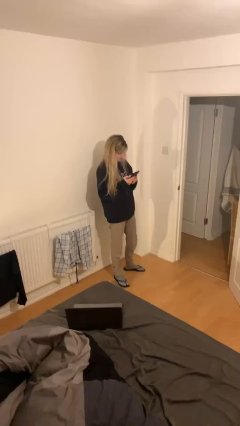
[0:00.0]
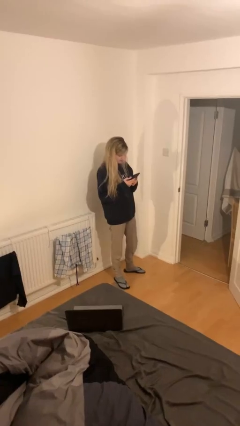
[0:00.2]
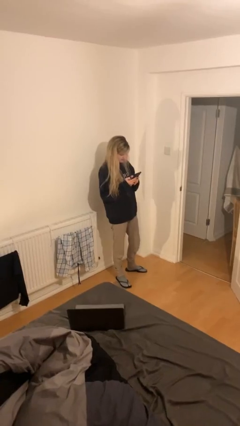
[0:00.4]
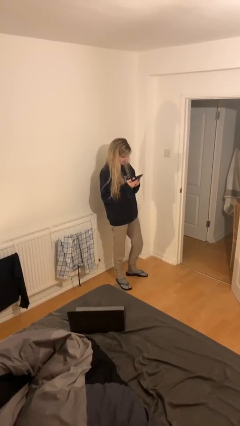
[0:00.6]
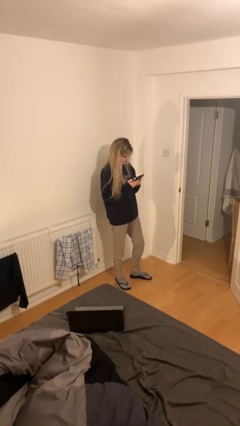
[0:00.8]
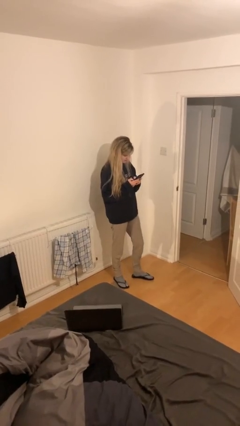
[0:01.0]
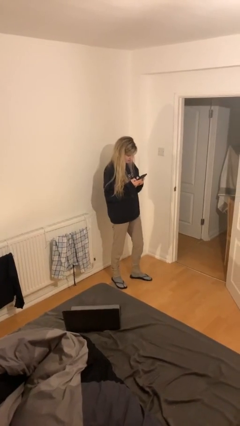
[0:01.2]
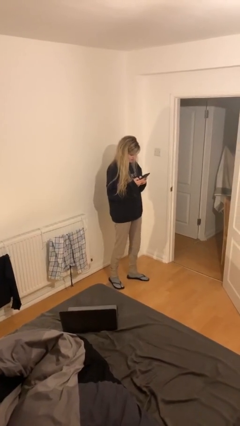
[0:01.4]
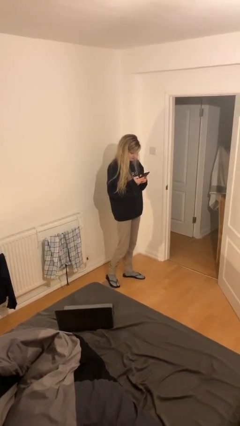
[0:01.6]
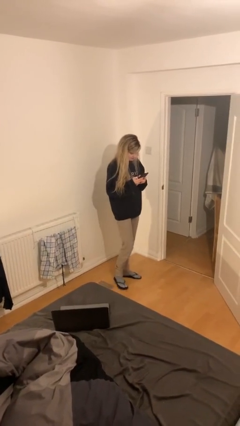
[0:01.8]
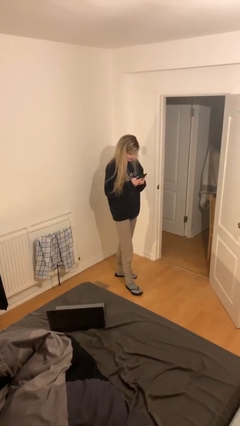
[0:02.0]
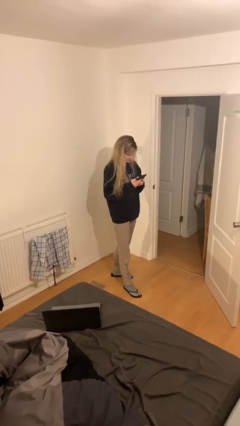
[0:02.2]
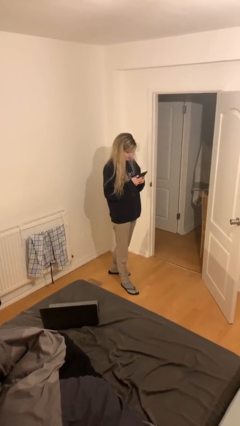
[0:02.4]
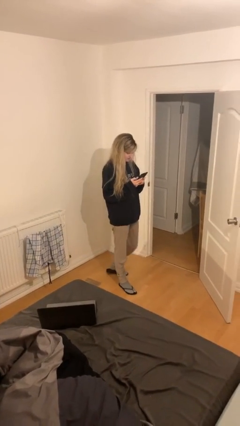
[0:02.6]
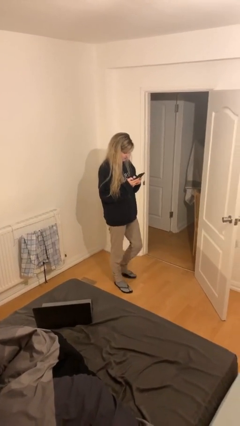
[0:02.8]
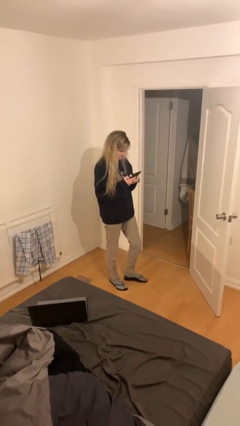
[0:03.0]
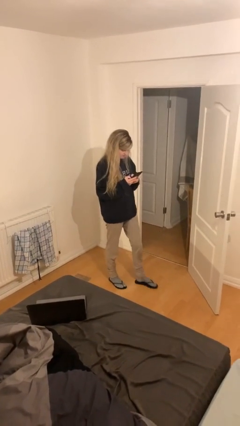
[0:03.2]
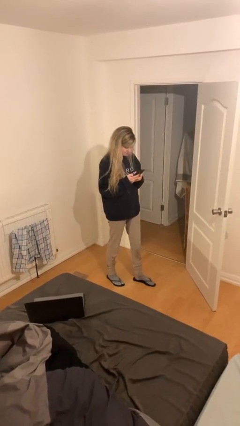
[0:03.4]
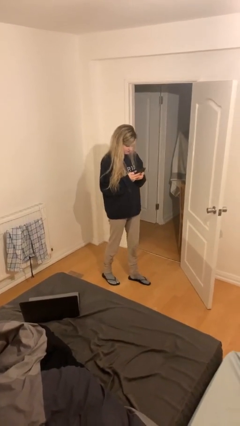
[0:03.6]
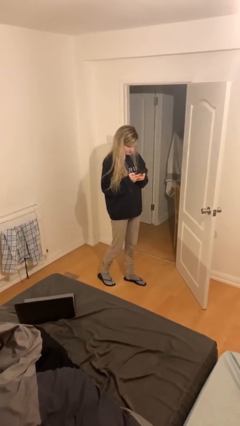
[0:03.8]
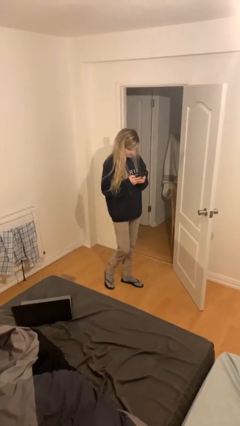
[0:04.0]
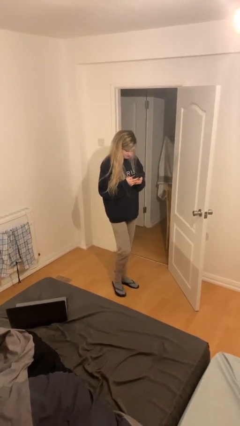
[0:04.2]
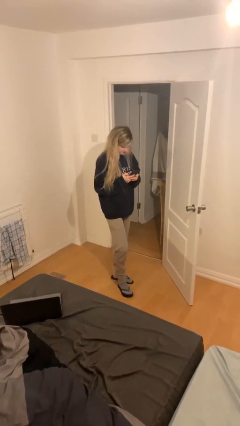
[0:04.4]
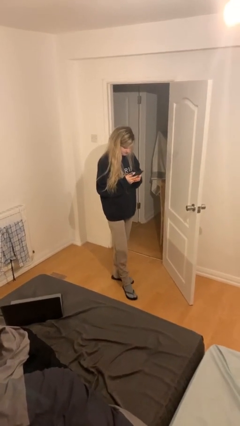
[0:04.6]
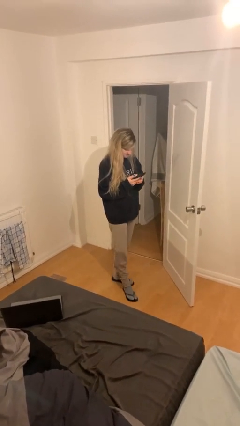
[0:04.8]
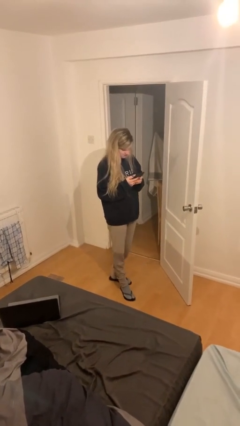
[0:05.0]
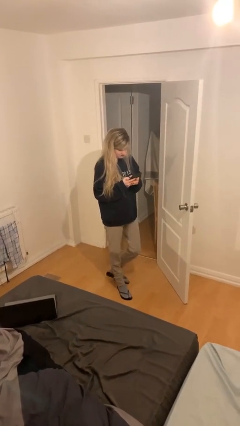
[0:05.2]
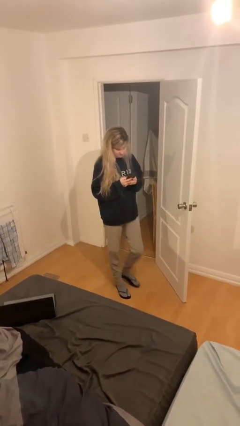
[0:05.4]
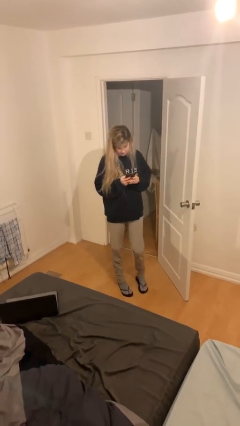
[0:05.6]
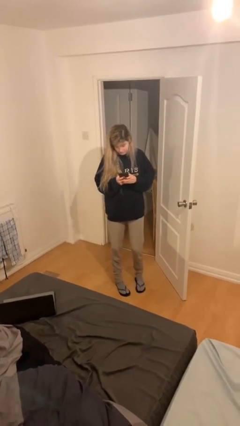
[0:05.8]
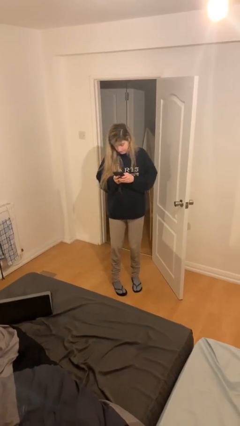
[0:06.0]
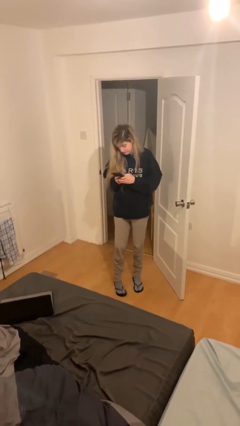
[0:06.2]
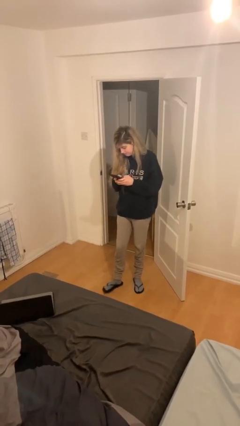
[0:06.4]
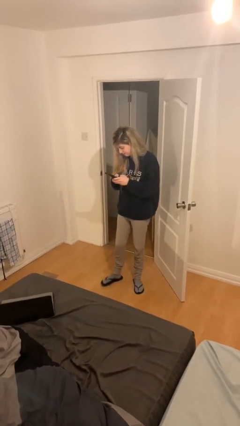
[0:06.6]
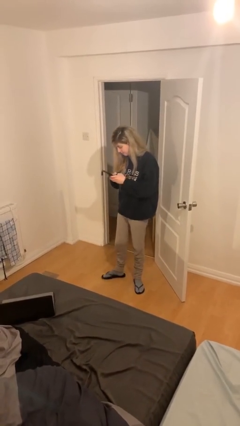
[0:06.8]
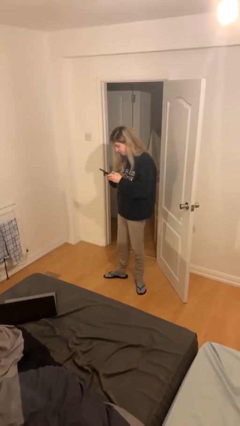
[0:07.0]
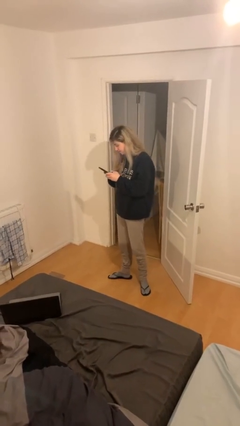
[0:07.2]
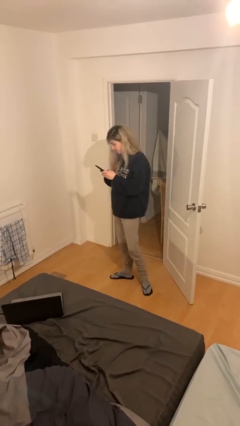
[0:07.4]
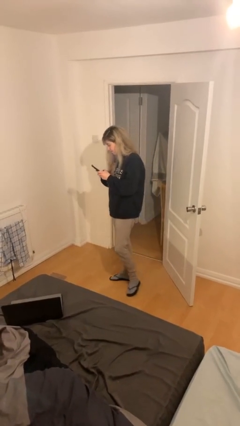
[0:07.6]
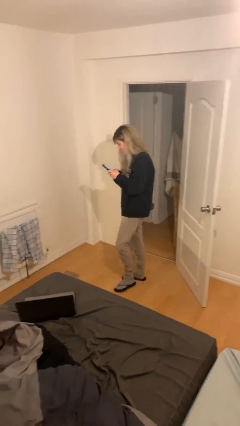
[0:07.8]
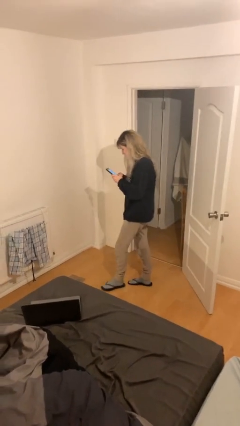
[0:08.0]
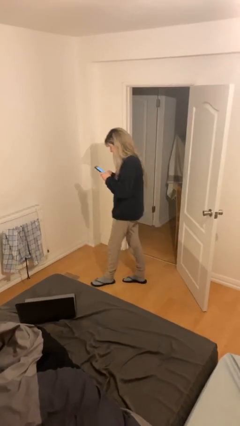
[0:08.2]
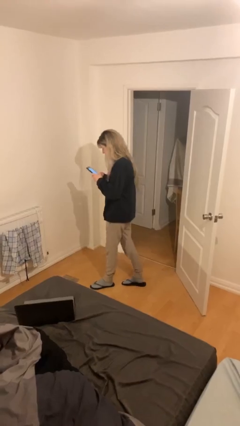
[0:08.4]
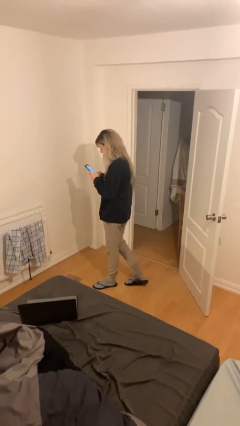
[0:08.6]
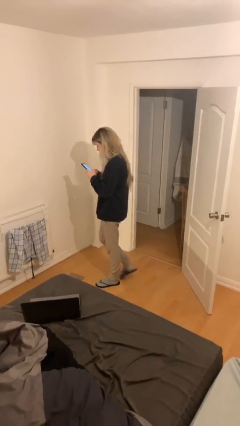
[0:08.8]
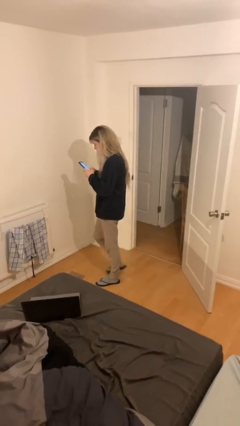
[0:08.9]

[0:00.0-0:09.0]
person texts on phone

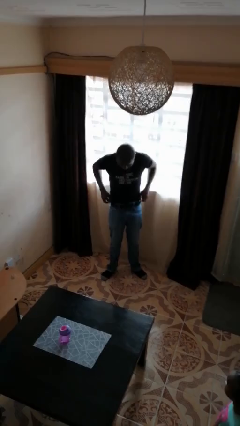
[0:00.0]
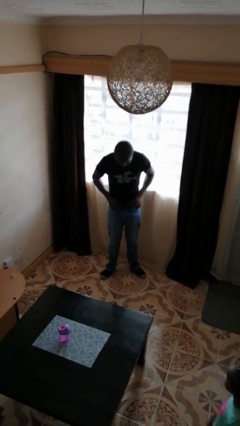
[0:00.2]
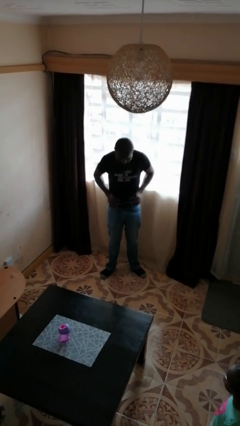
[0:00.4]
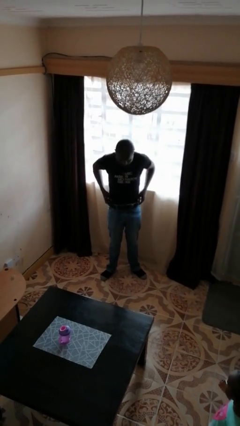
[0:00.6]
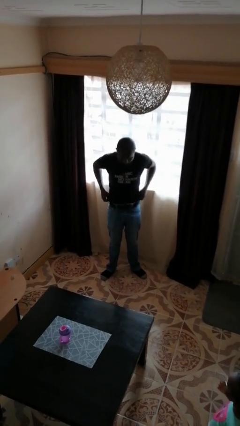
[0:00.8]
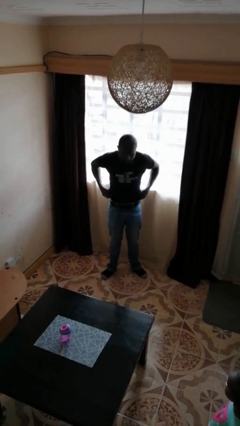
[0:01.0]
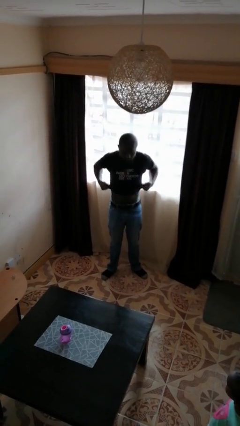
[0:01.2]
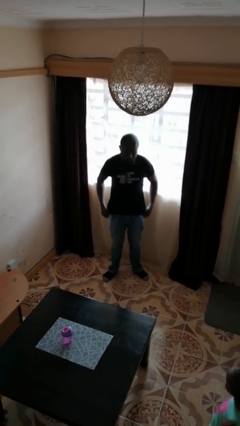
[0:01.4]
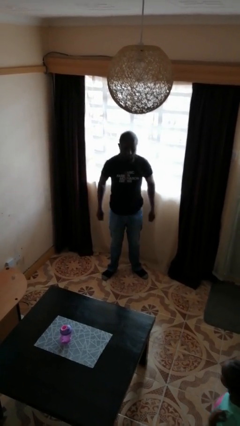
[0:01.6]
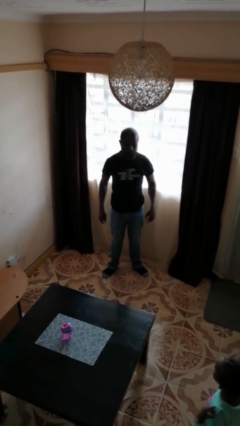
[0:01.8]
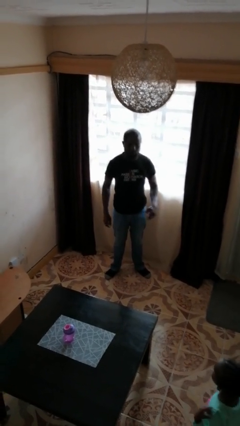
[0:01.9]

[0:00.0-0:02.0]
person untucks shirt

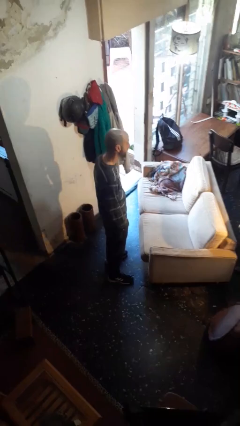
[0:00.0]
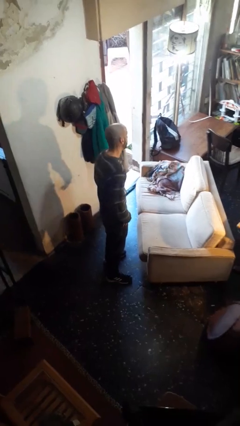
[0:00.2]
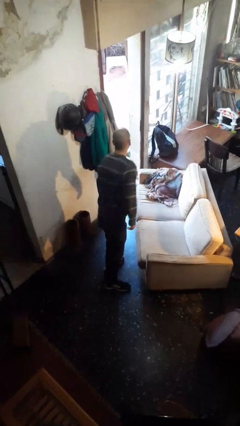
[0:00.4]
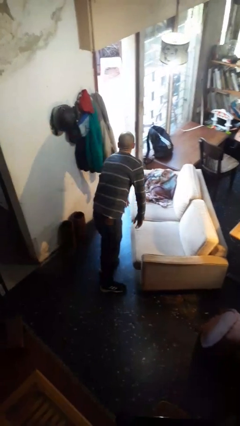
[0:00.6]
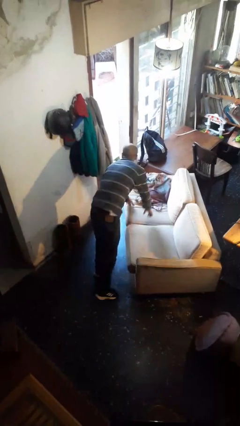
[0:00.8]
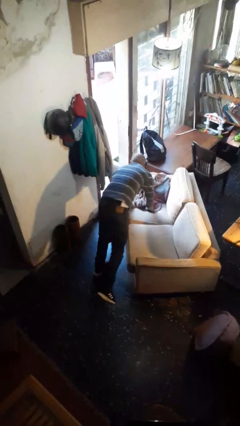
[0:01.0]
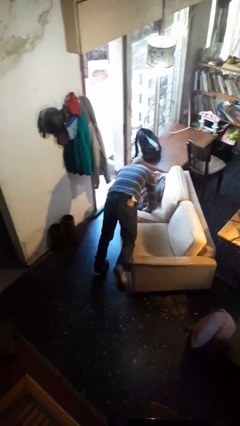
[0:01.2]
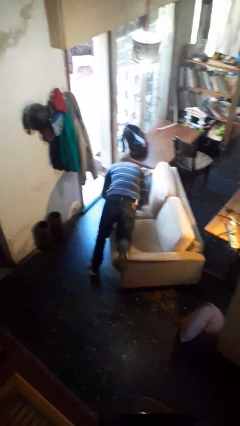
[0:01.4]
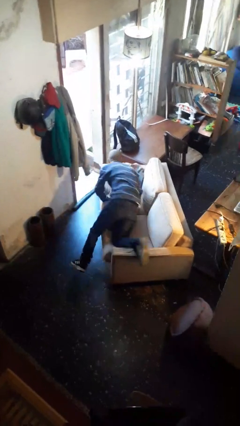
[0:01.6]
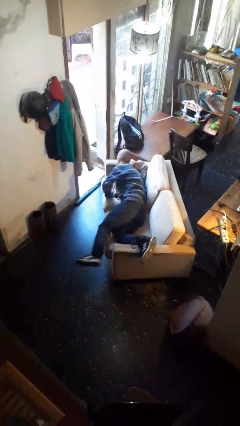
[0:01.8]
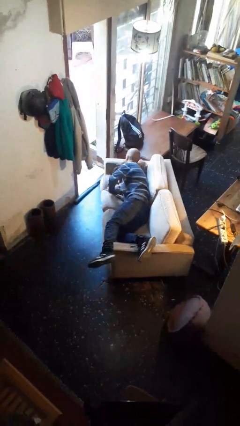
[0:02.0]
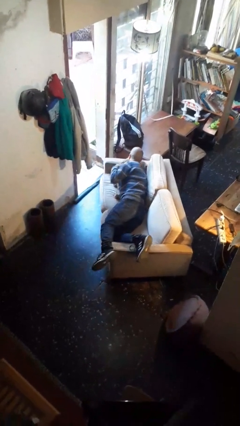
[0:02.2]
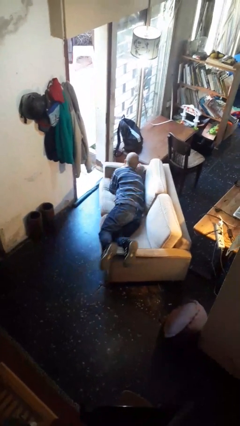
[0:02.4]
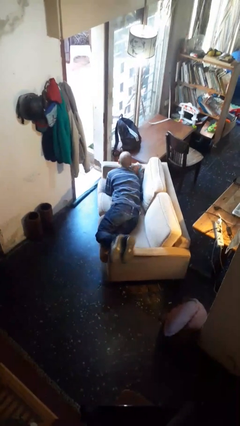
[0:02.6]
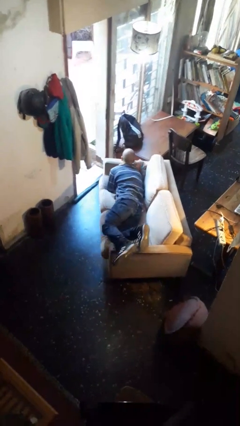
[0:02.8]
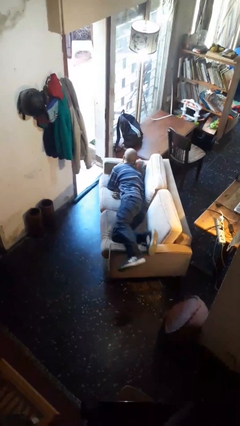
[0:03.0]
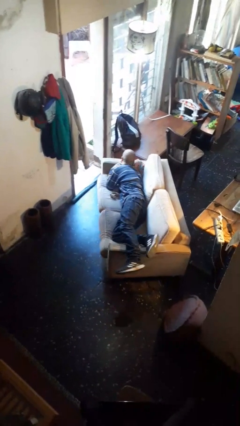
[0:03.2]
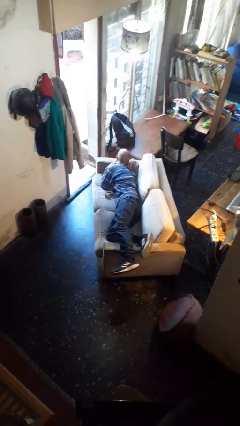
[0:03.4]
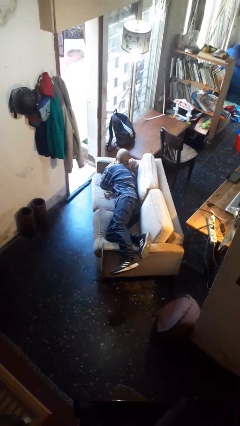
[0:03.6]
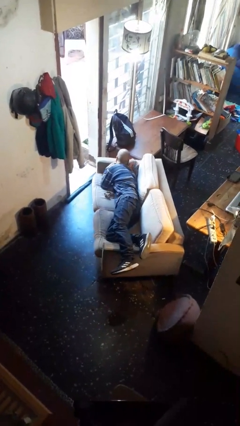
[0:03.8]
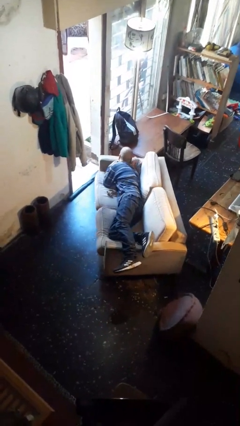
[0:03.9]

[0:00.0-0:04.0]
person lies down on couch

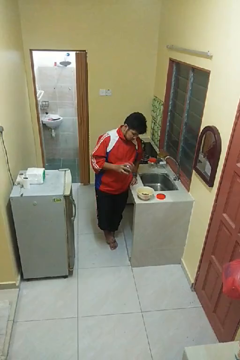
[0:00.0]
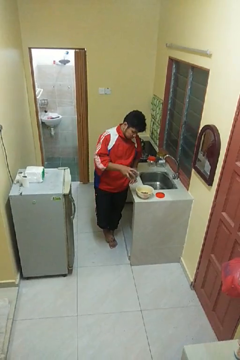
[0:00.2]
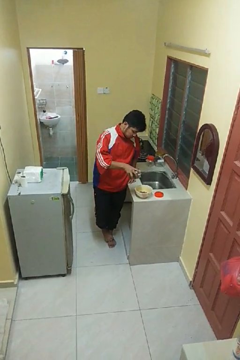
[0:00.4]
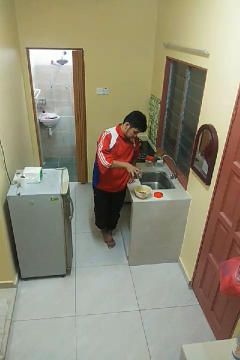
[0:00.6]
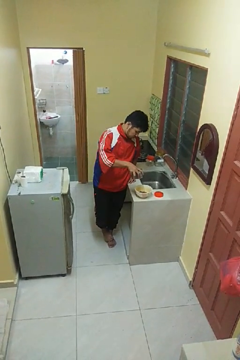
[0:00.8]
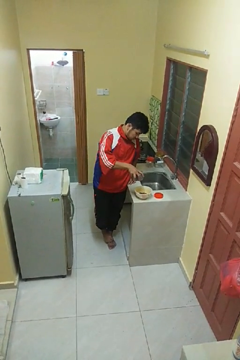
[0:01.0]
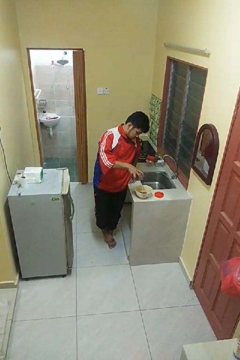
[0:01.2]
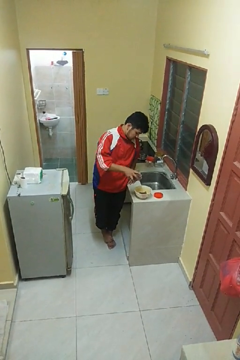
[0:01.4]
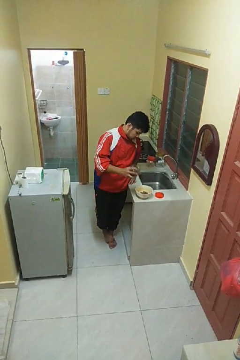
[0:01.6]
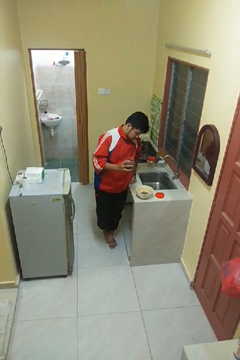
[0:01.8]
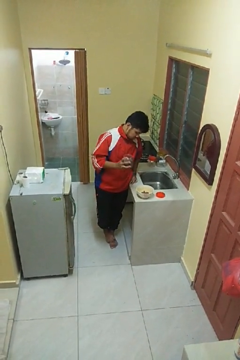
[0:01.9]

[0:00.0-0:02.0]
person pours into bowl

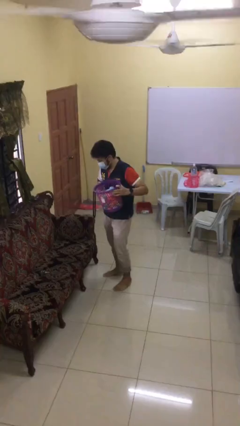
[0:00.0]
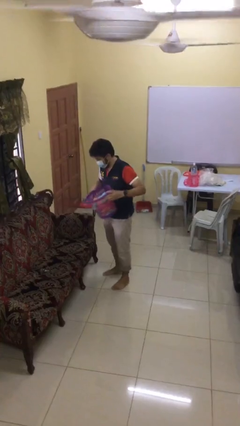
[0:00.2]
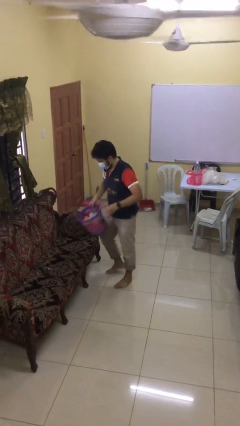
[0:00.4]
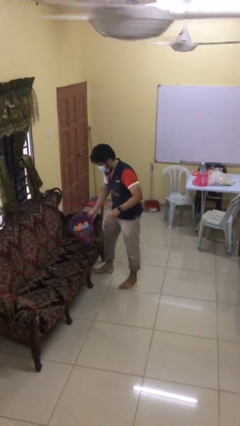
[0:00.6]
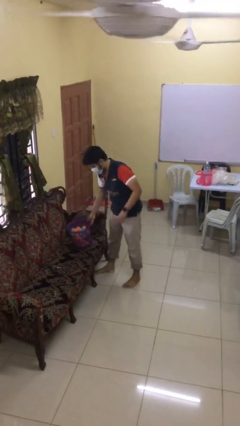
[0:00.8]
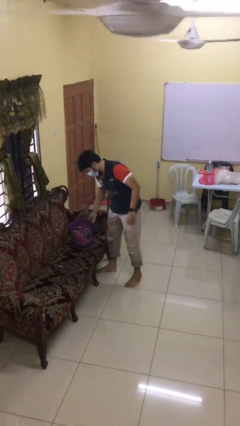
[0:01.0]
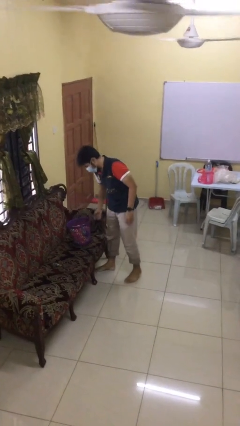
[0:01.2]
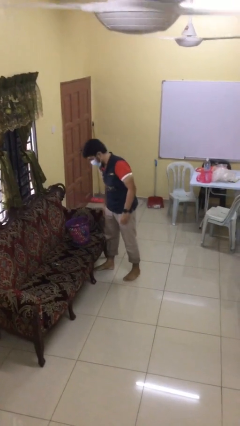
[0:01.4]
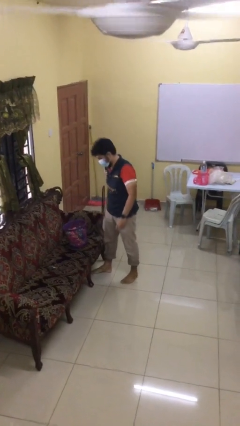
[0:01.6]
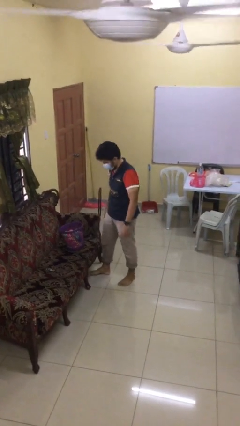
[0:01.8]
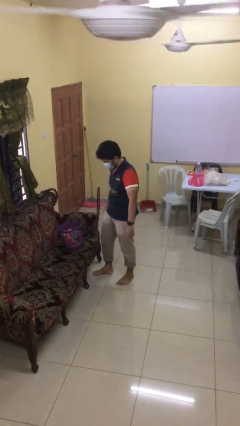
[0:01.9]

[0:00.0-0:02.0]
person puts down object on couch
